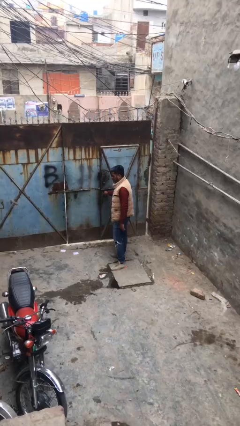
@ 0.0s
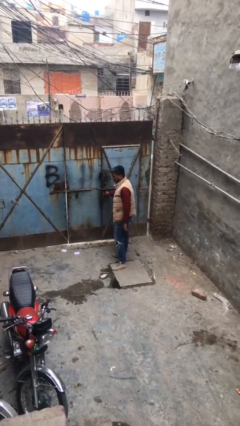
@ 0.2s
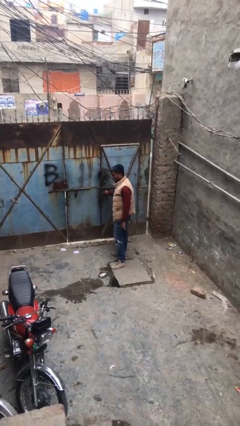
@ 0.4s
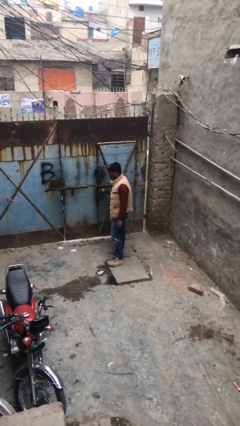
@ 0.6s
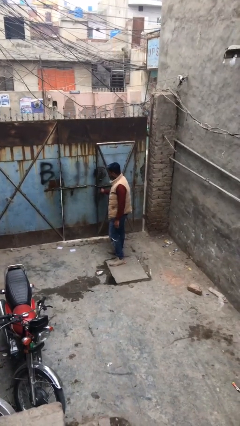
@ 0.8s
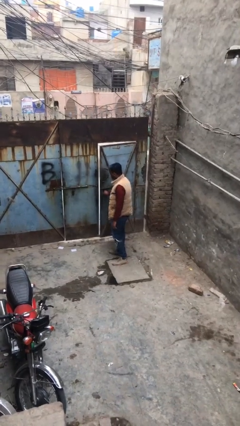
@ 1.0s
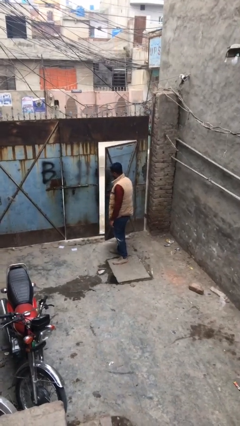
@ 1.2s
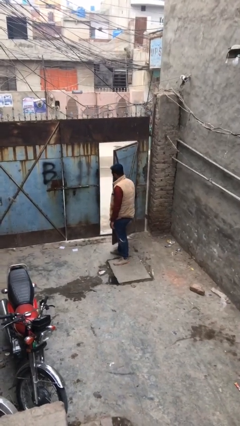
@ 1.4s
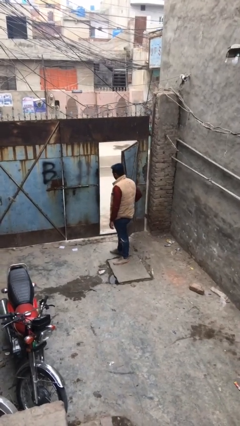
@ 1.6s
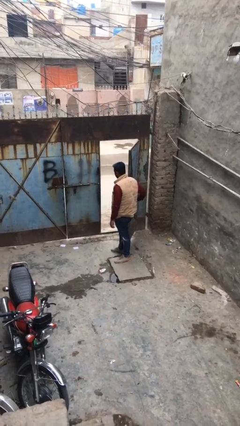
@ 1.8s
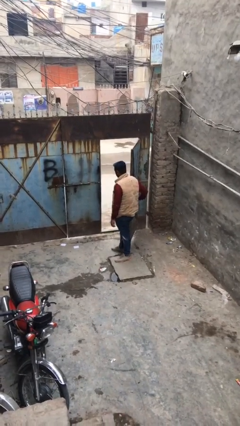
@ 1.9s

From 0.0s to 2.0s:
person opens facility door

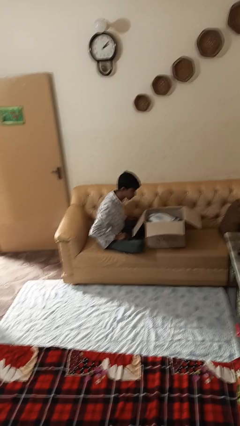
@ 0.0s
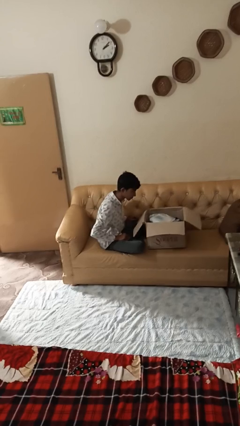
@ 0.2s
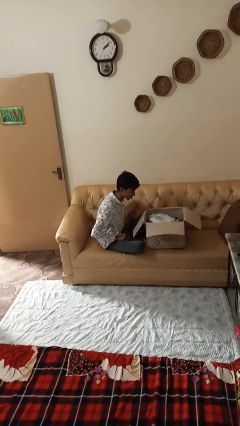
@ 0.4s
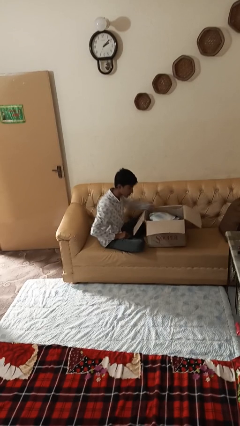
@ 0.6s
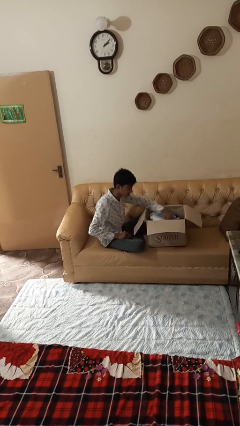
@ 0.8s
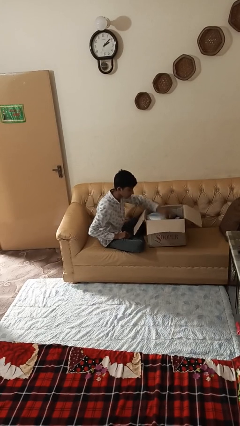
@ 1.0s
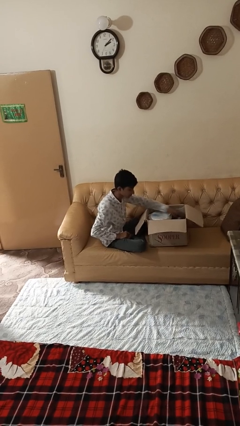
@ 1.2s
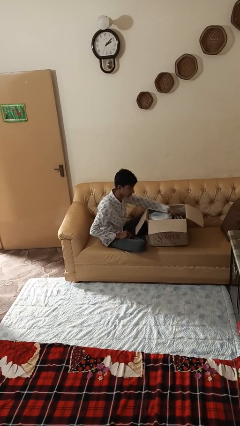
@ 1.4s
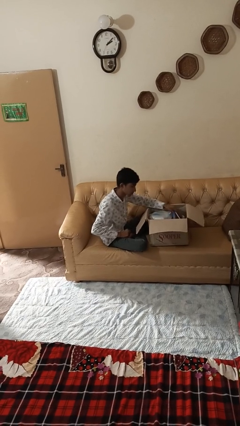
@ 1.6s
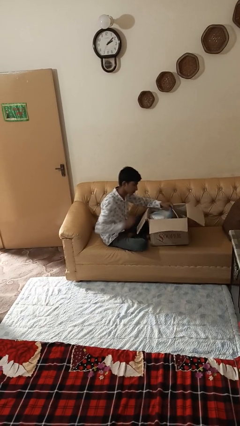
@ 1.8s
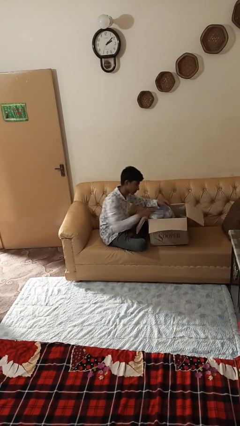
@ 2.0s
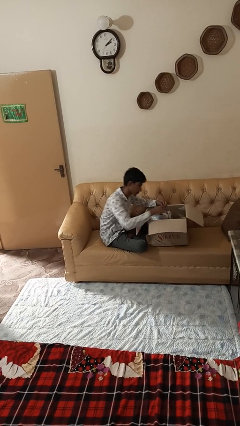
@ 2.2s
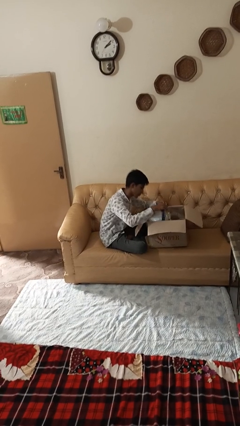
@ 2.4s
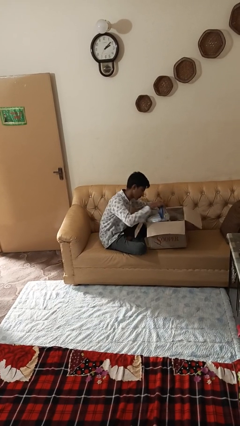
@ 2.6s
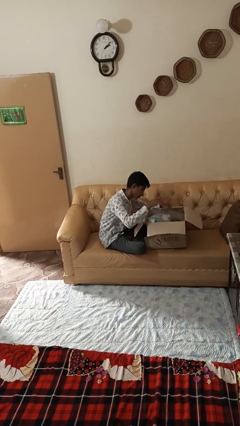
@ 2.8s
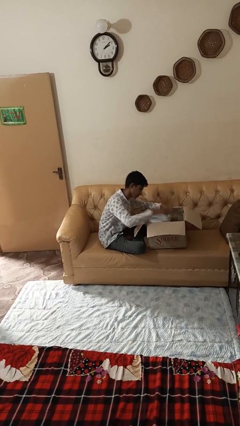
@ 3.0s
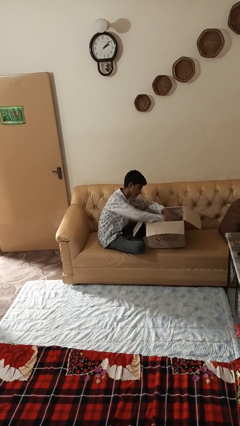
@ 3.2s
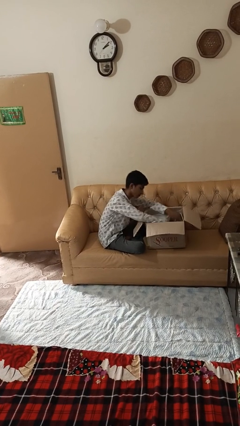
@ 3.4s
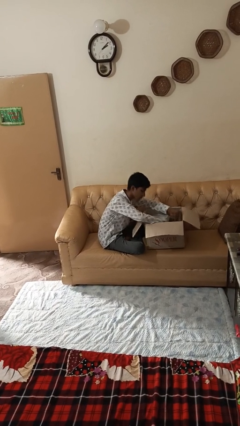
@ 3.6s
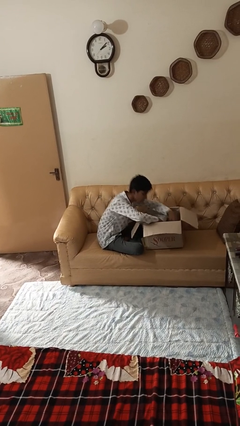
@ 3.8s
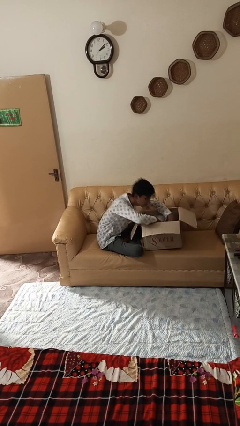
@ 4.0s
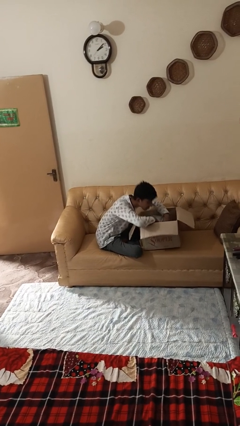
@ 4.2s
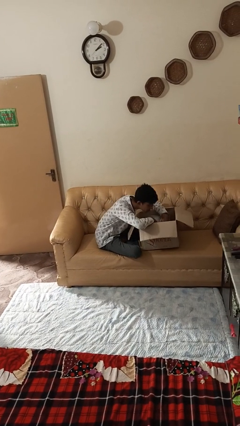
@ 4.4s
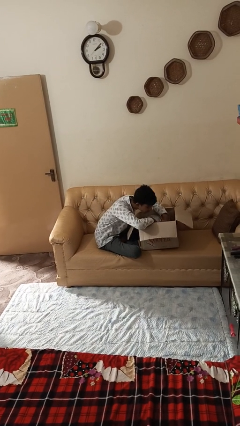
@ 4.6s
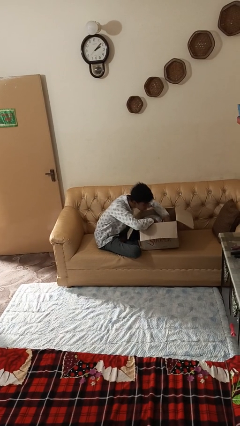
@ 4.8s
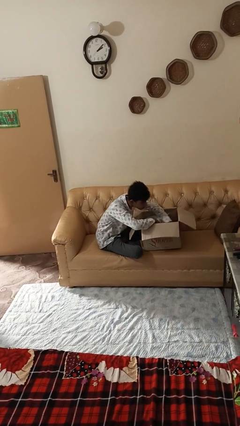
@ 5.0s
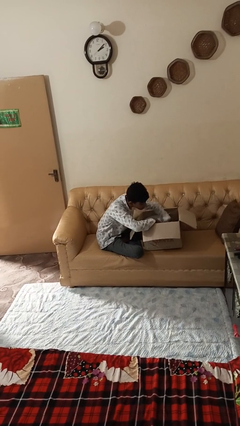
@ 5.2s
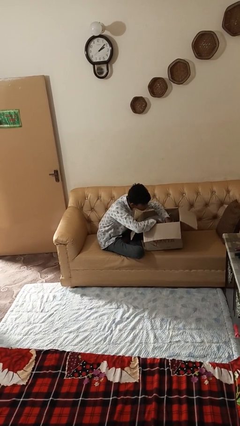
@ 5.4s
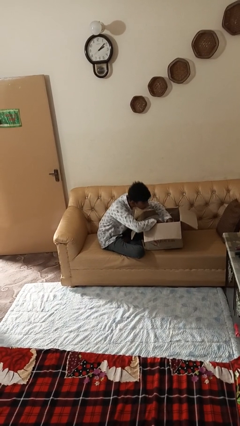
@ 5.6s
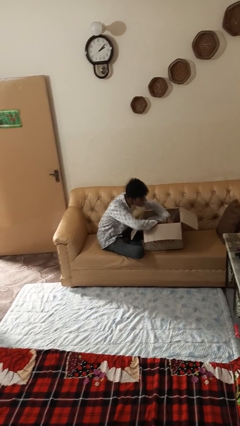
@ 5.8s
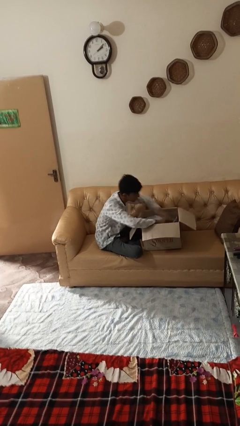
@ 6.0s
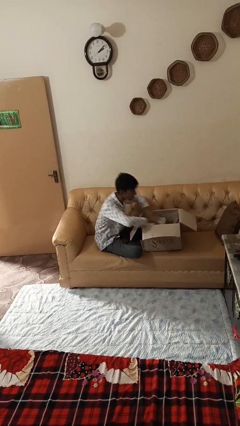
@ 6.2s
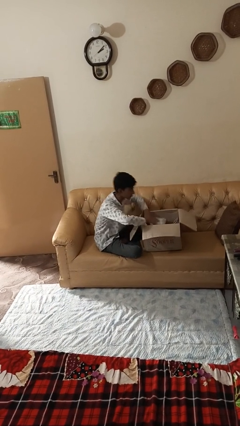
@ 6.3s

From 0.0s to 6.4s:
person searches in box

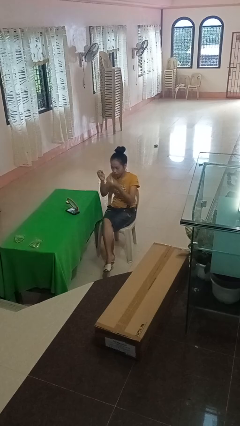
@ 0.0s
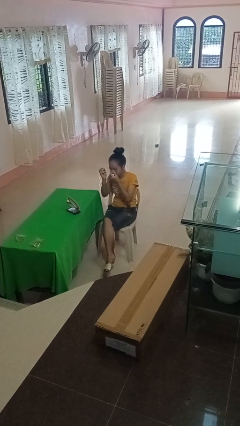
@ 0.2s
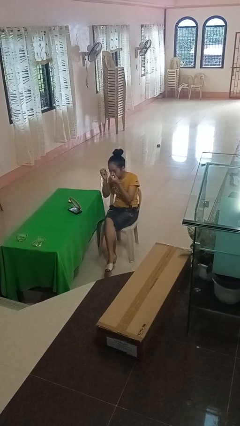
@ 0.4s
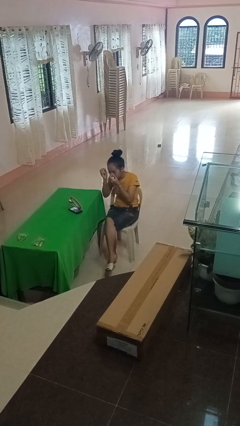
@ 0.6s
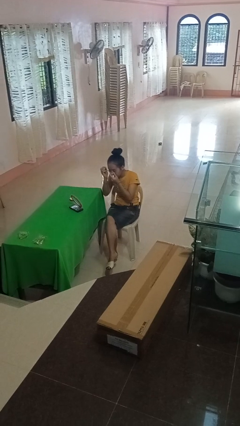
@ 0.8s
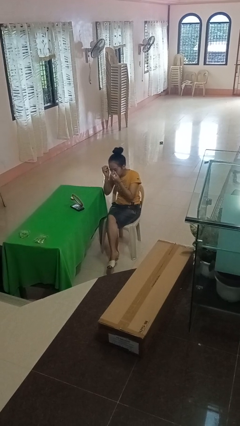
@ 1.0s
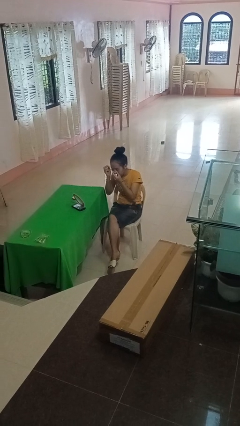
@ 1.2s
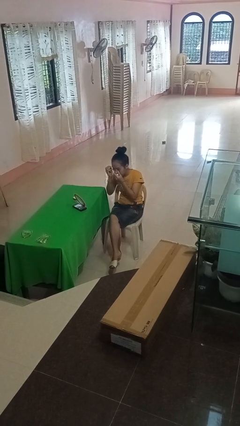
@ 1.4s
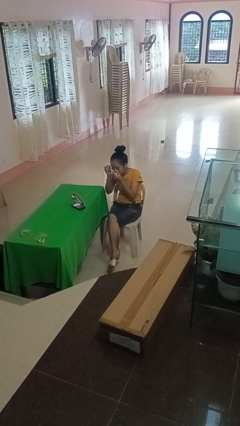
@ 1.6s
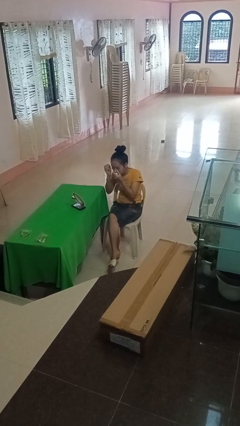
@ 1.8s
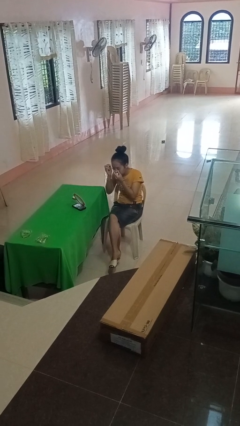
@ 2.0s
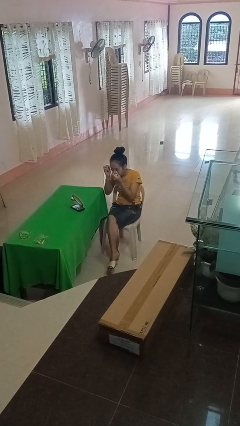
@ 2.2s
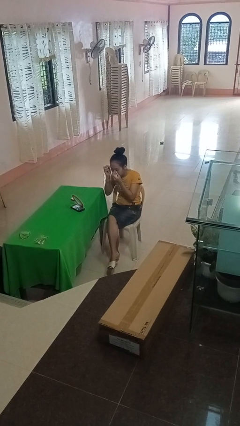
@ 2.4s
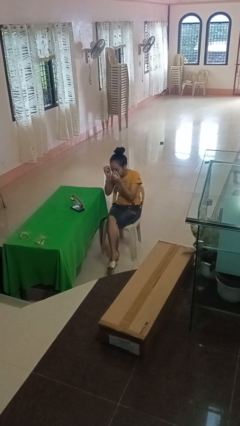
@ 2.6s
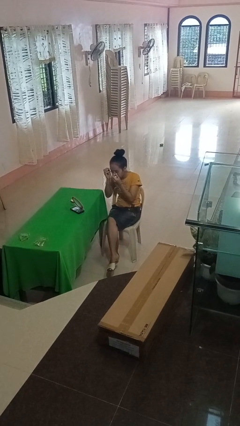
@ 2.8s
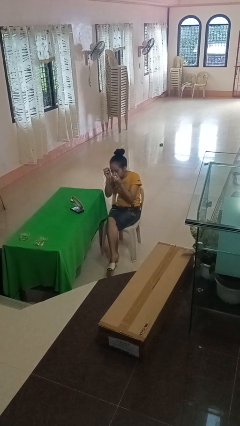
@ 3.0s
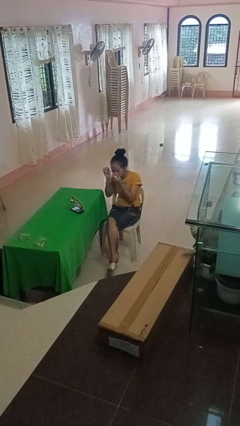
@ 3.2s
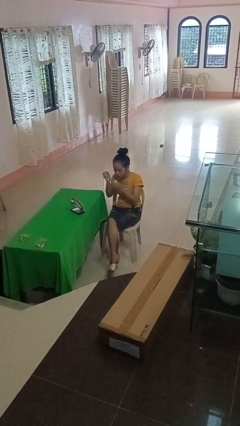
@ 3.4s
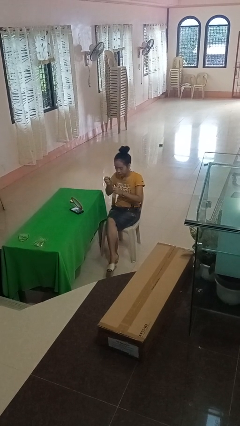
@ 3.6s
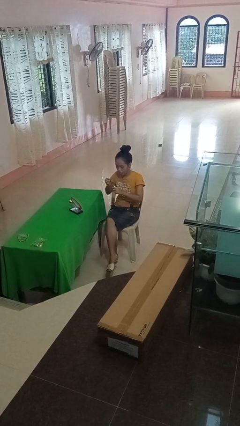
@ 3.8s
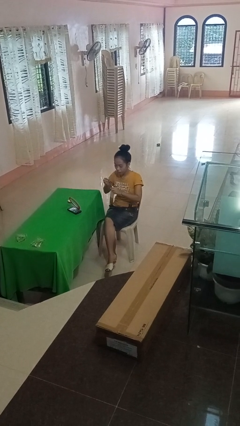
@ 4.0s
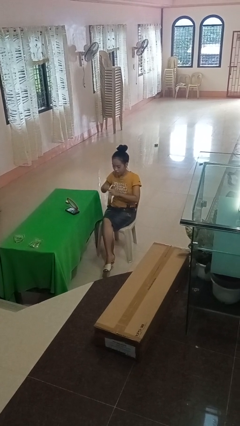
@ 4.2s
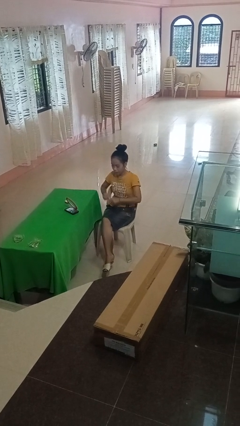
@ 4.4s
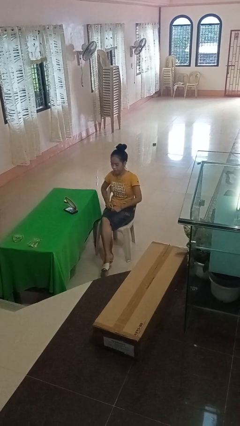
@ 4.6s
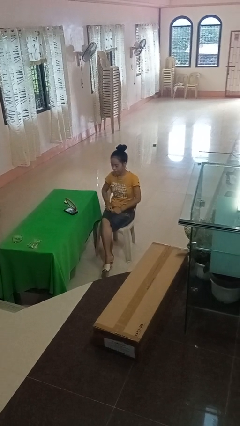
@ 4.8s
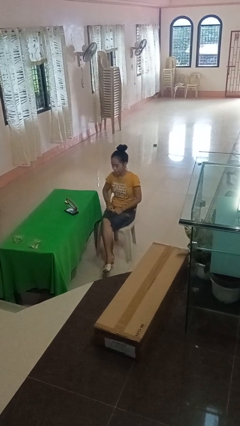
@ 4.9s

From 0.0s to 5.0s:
person applies eye makeup

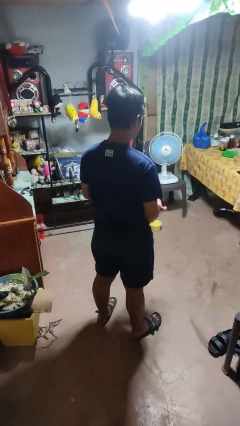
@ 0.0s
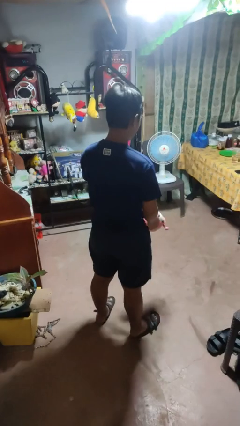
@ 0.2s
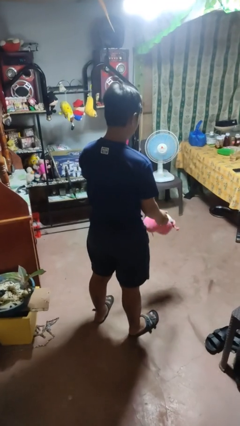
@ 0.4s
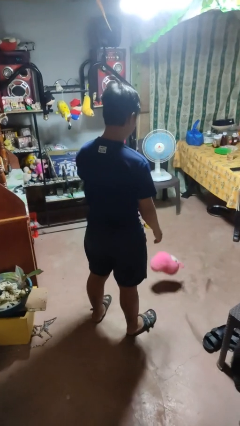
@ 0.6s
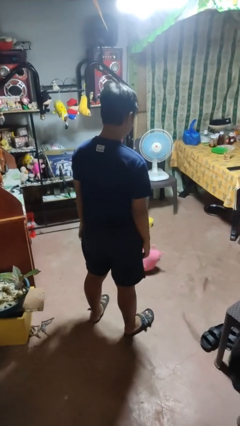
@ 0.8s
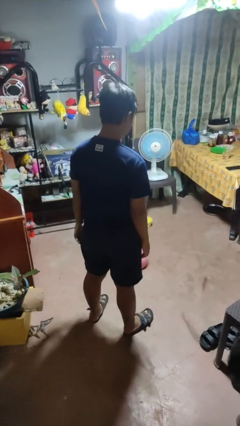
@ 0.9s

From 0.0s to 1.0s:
person throws object into air

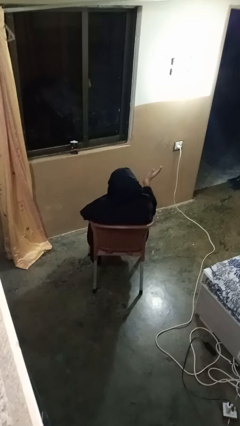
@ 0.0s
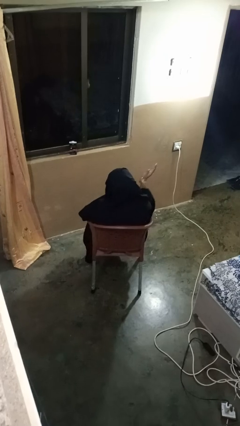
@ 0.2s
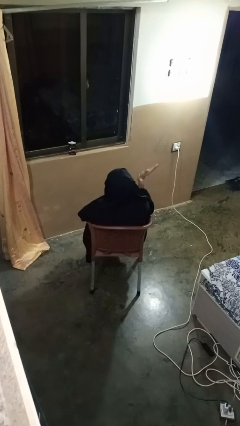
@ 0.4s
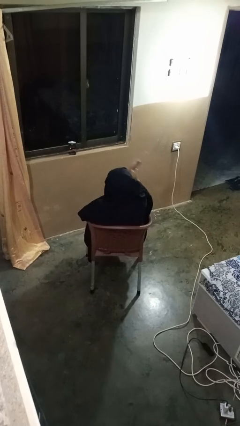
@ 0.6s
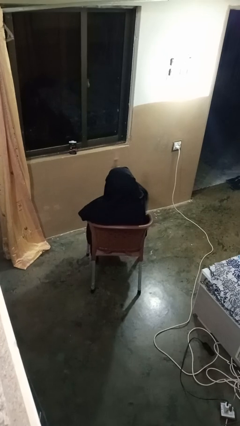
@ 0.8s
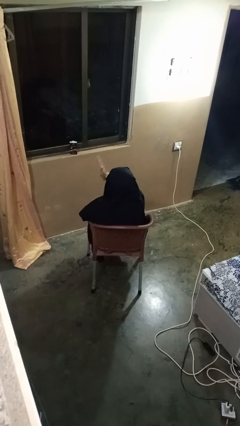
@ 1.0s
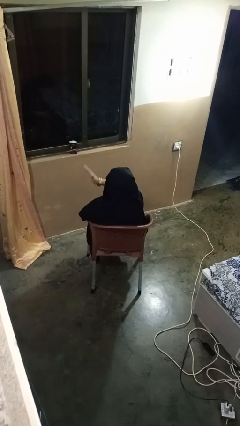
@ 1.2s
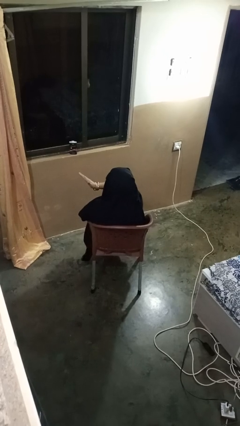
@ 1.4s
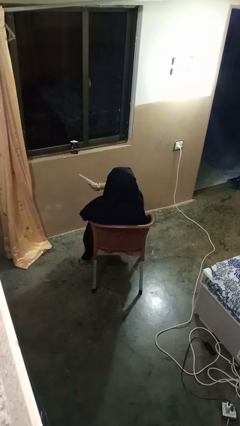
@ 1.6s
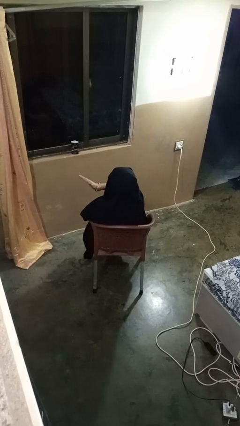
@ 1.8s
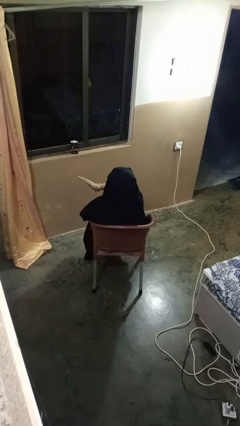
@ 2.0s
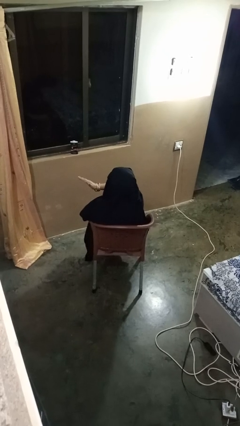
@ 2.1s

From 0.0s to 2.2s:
person gestures swipe left

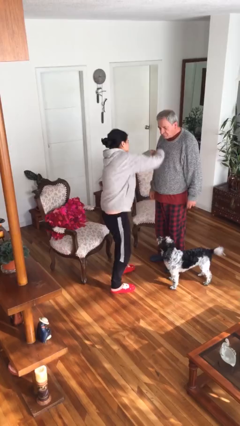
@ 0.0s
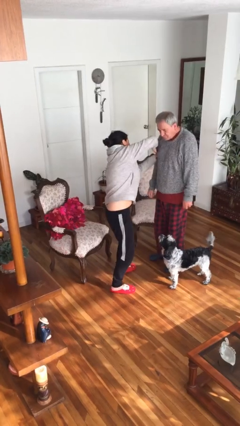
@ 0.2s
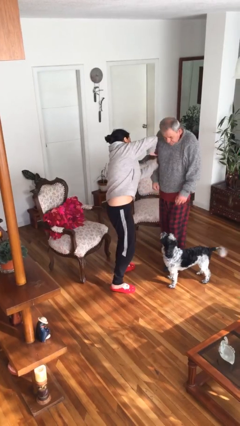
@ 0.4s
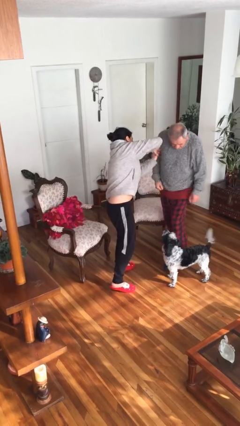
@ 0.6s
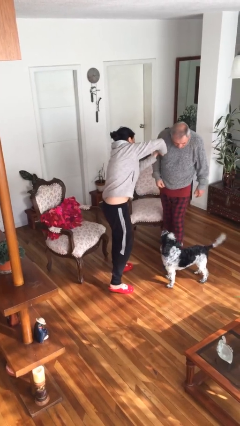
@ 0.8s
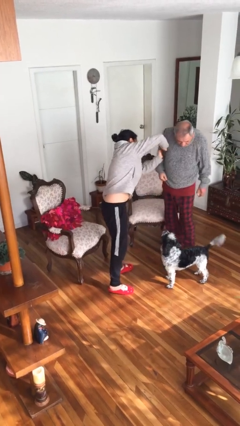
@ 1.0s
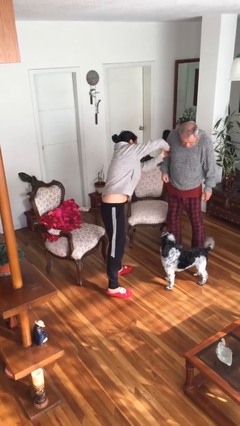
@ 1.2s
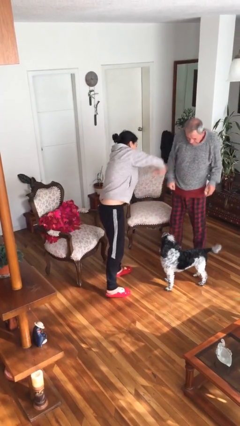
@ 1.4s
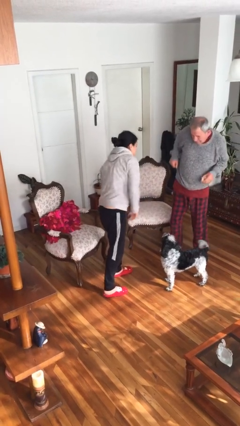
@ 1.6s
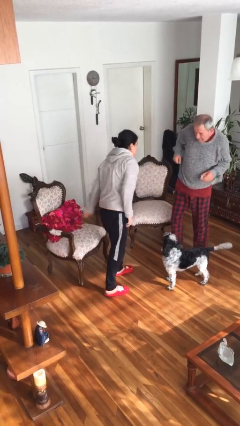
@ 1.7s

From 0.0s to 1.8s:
person tickles person
